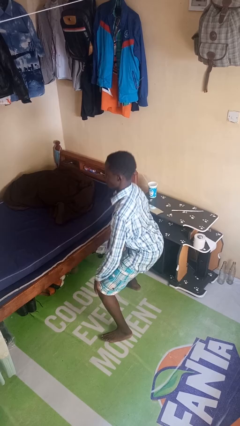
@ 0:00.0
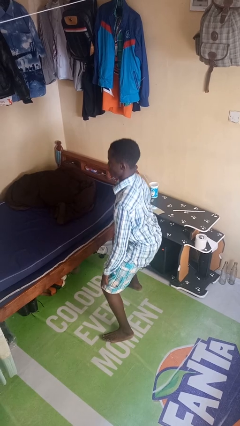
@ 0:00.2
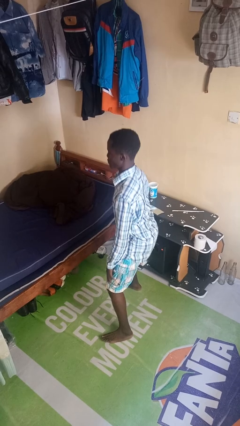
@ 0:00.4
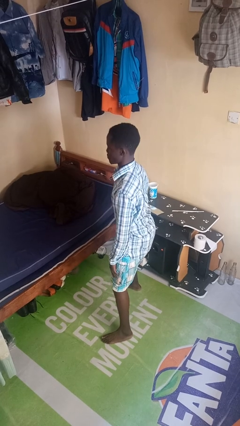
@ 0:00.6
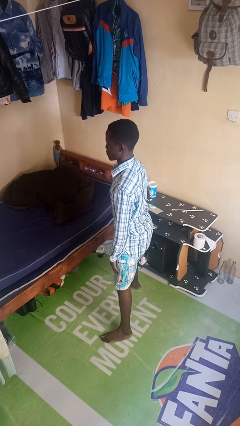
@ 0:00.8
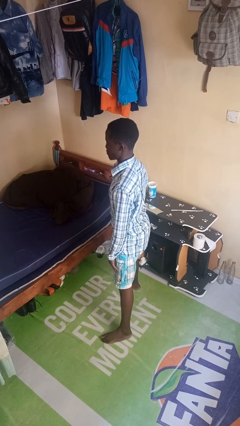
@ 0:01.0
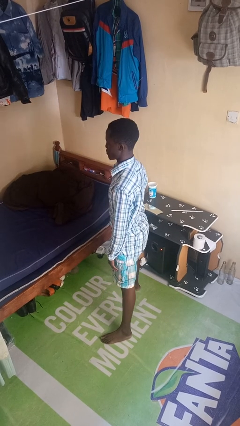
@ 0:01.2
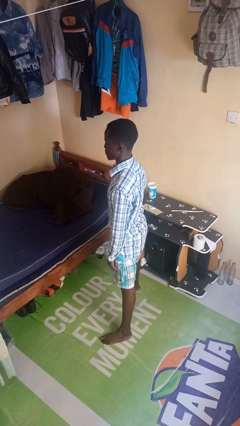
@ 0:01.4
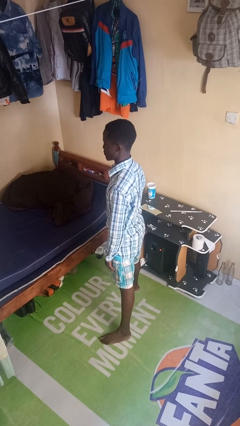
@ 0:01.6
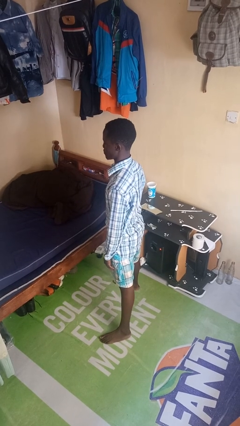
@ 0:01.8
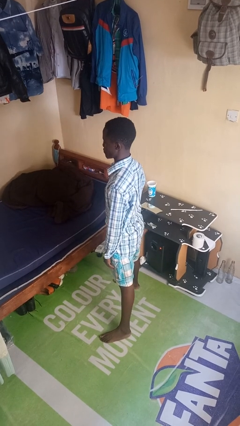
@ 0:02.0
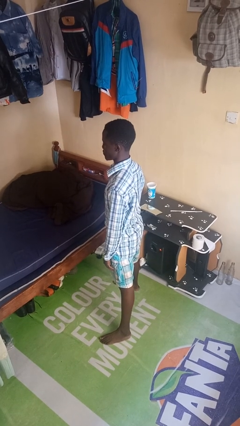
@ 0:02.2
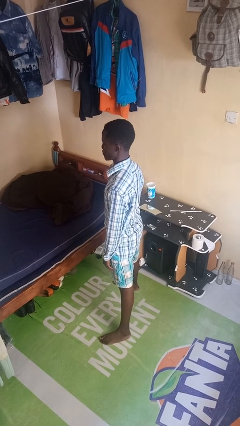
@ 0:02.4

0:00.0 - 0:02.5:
person stands up

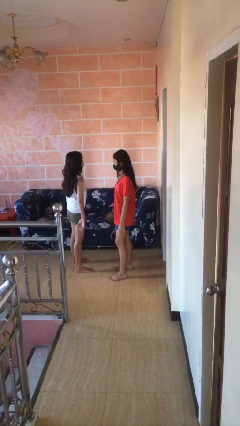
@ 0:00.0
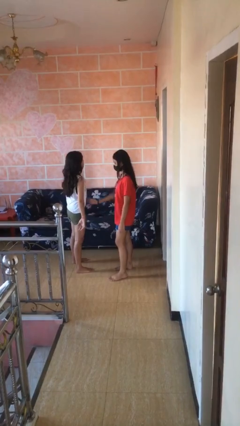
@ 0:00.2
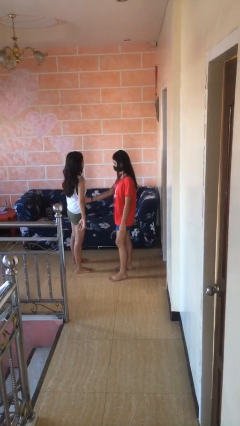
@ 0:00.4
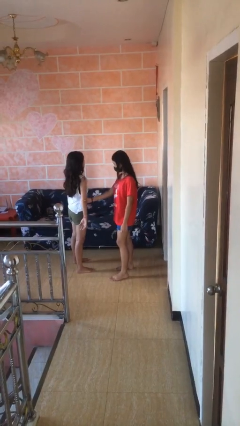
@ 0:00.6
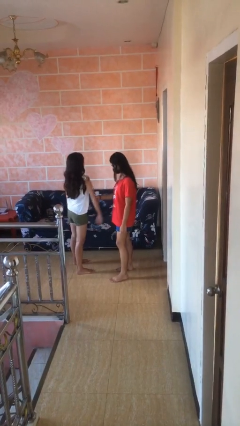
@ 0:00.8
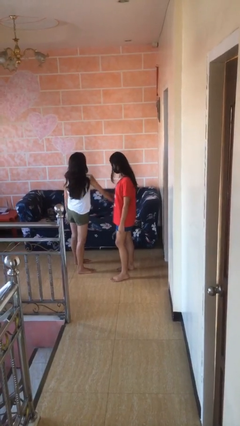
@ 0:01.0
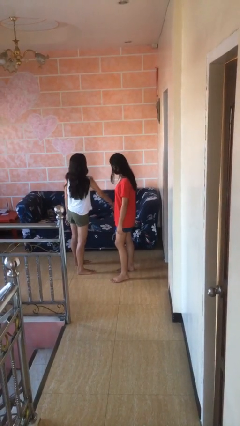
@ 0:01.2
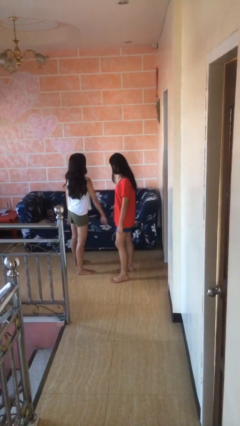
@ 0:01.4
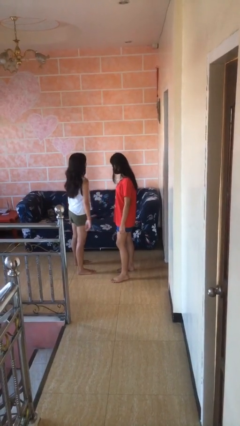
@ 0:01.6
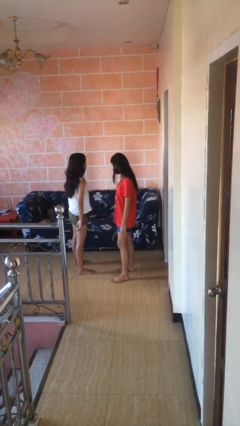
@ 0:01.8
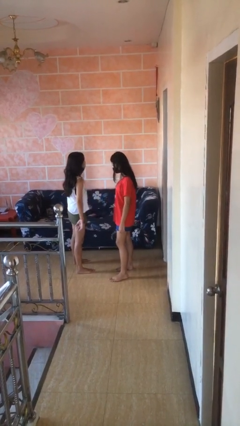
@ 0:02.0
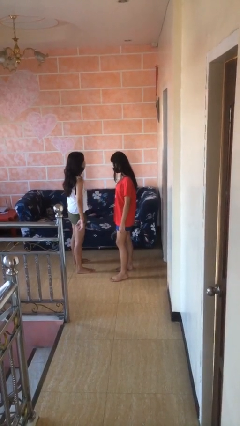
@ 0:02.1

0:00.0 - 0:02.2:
person grabs person by forearm

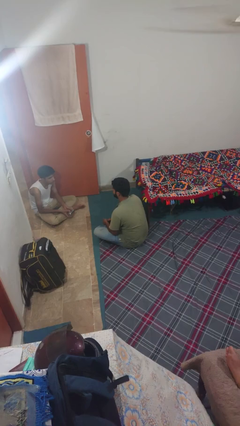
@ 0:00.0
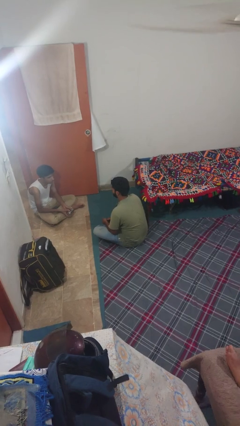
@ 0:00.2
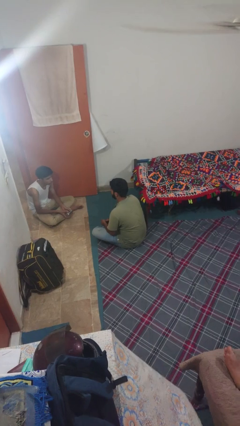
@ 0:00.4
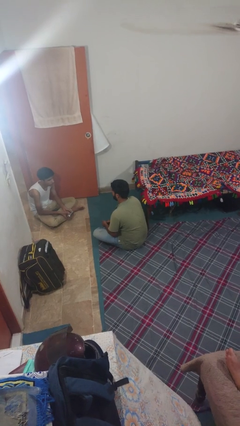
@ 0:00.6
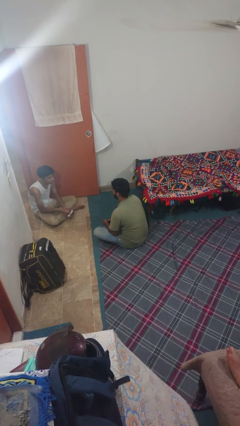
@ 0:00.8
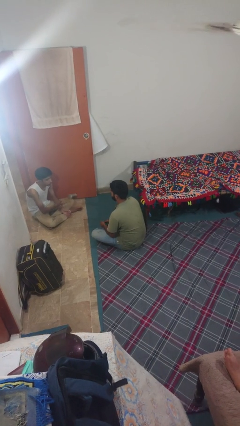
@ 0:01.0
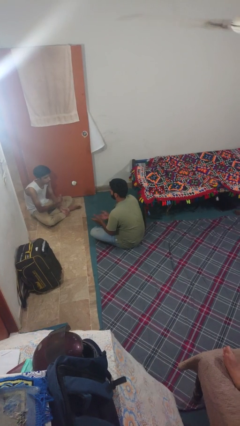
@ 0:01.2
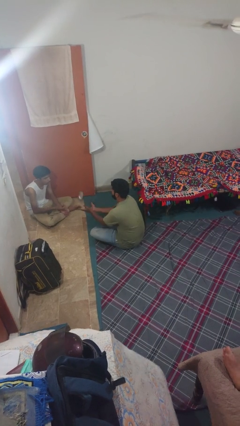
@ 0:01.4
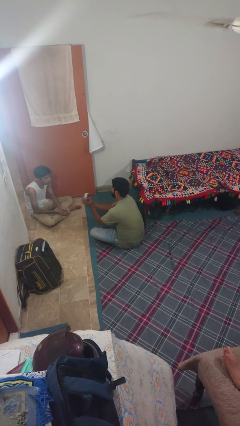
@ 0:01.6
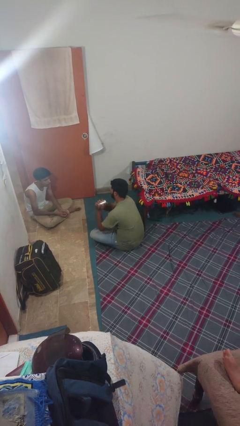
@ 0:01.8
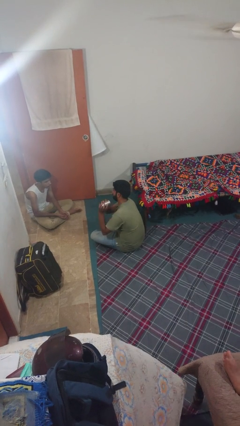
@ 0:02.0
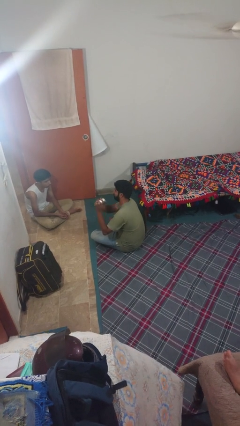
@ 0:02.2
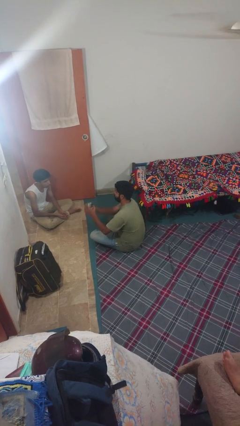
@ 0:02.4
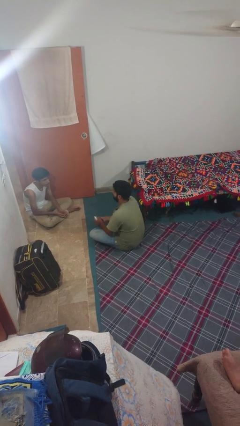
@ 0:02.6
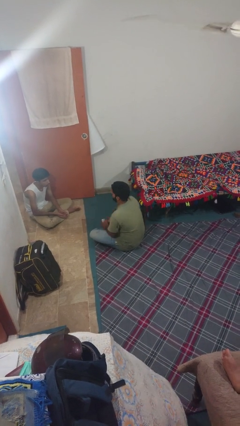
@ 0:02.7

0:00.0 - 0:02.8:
person catches object from person

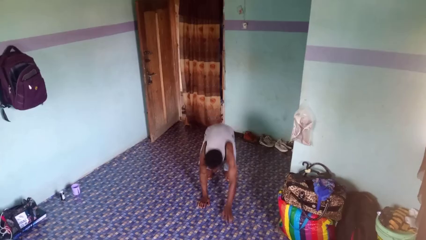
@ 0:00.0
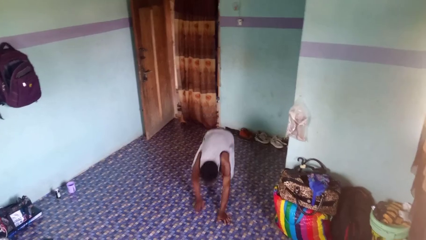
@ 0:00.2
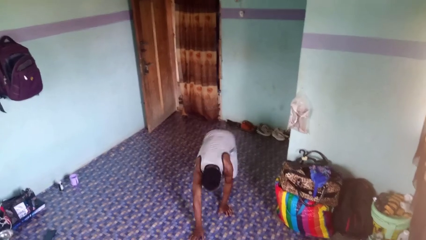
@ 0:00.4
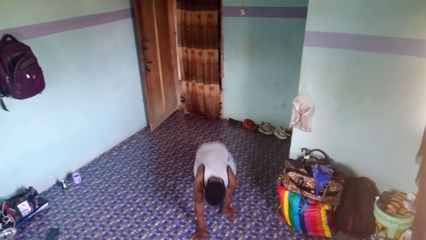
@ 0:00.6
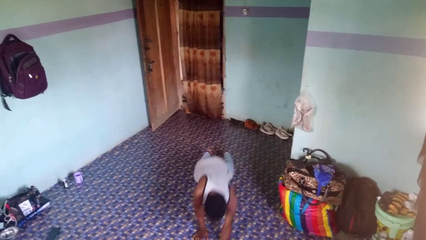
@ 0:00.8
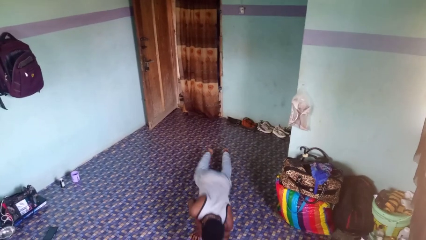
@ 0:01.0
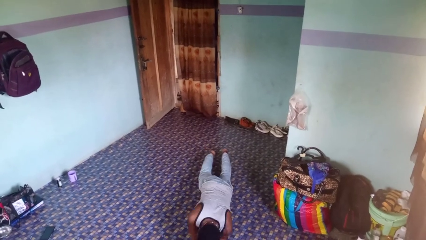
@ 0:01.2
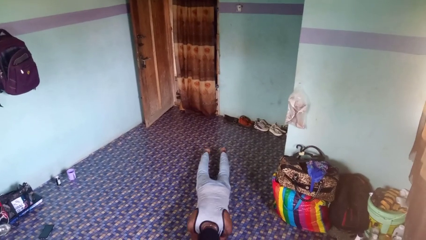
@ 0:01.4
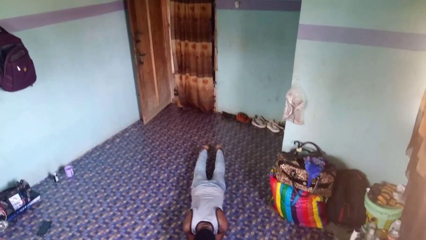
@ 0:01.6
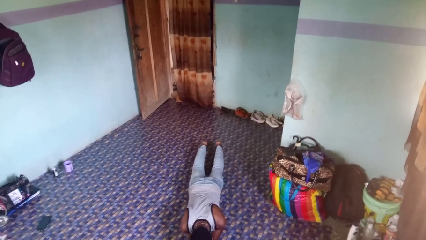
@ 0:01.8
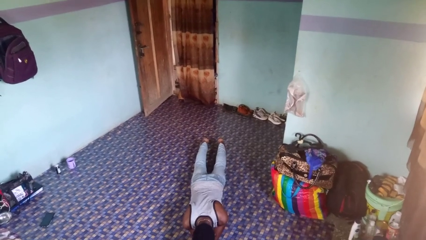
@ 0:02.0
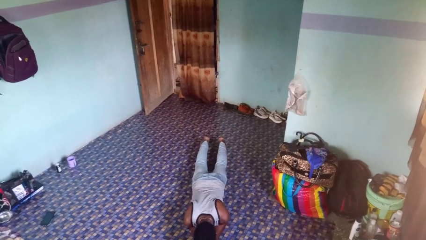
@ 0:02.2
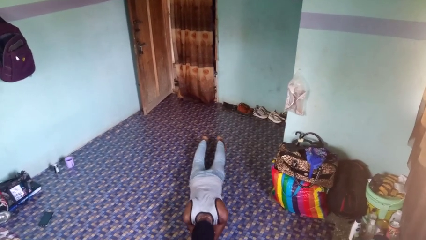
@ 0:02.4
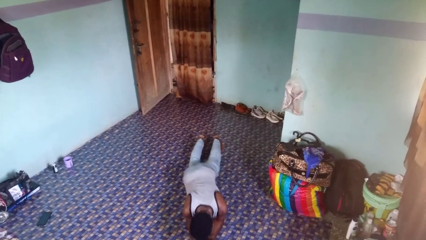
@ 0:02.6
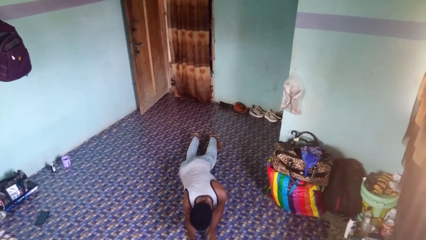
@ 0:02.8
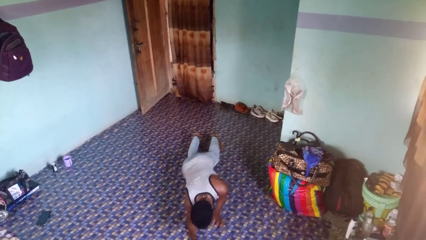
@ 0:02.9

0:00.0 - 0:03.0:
person exercises with plank

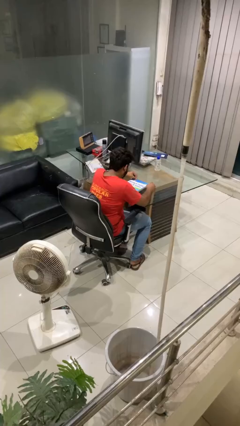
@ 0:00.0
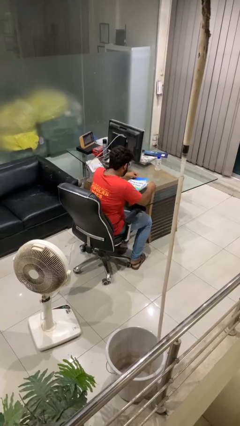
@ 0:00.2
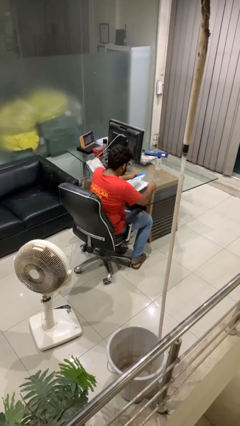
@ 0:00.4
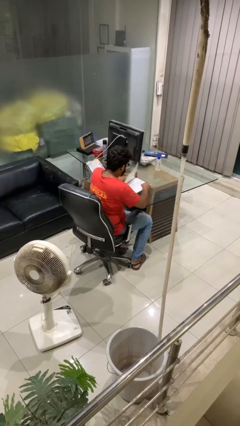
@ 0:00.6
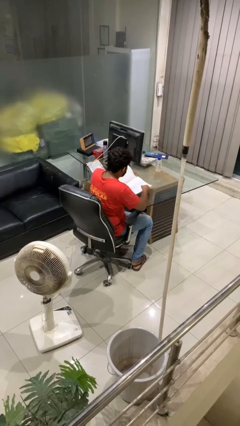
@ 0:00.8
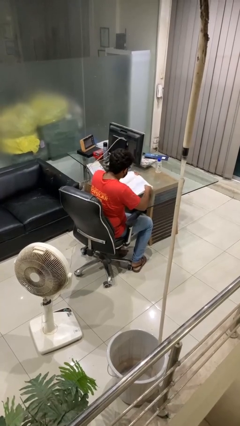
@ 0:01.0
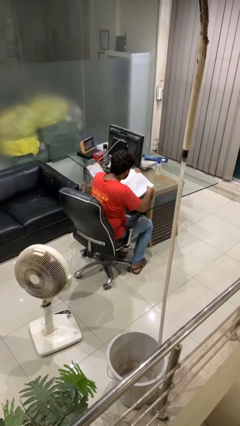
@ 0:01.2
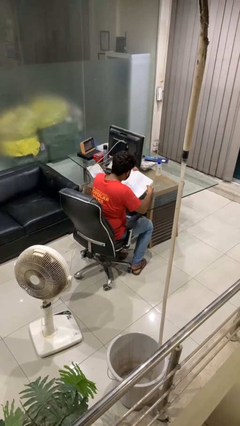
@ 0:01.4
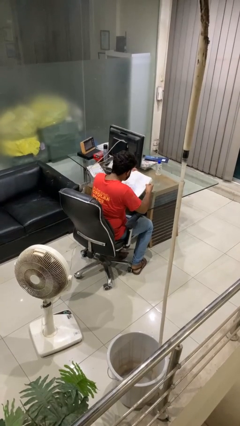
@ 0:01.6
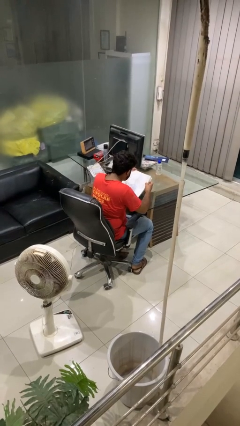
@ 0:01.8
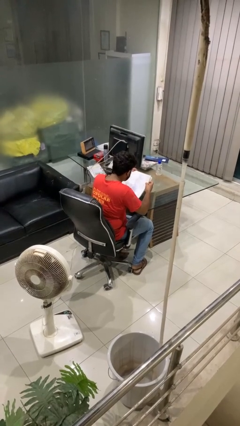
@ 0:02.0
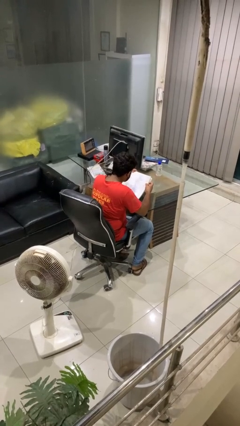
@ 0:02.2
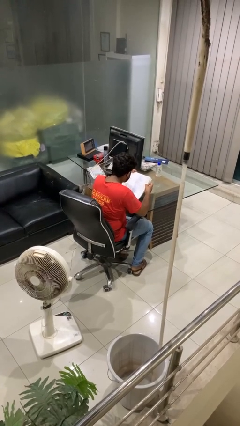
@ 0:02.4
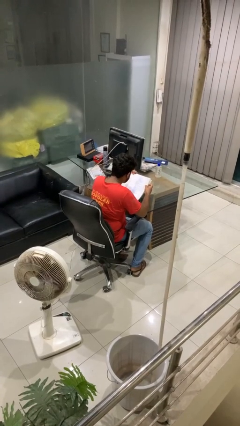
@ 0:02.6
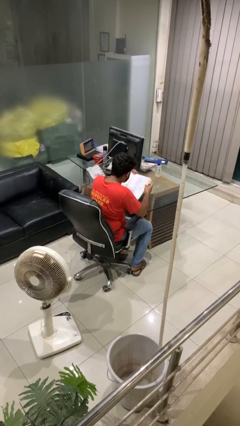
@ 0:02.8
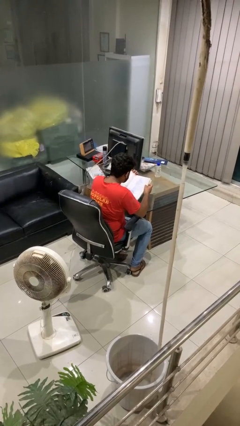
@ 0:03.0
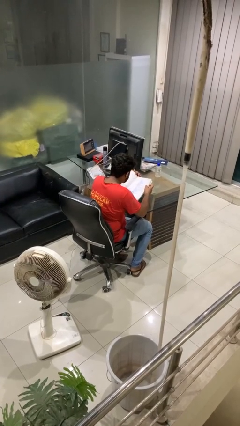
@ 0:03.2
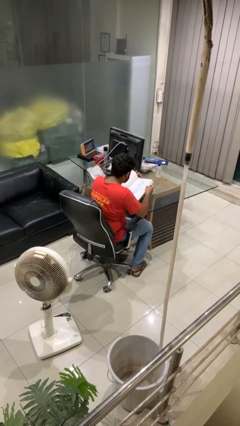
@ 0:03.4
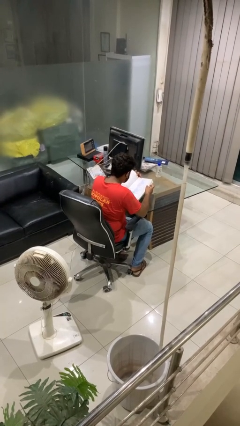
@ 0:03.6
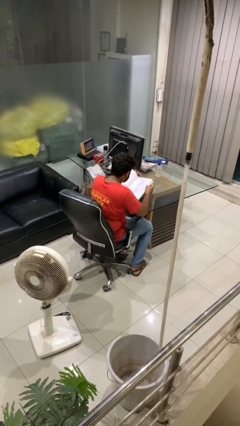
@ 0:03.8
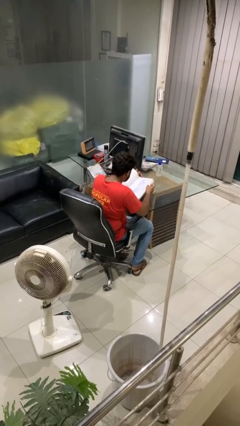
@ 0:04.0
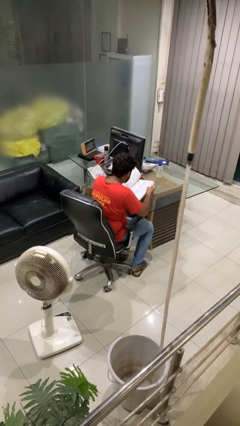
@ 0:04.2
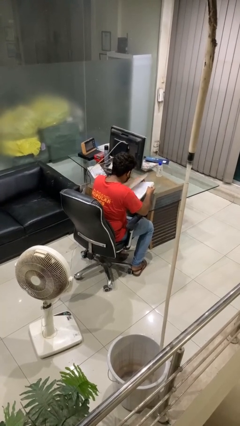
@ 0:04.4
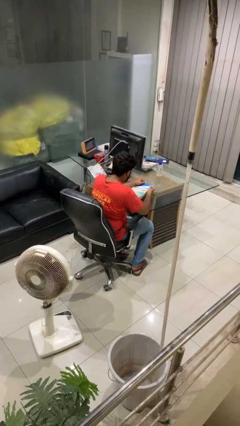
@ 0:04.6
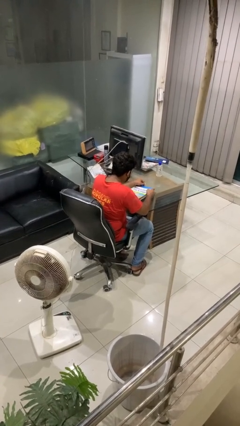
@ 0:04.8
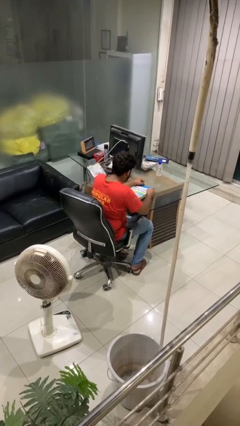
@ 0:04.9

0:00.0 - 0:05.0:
person reads book

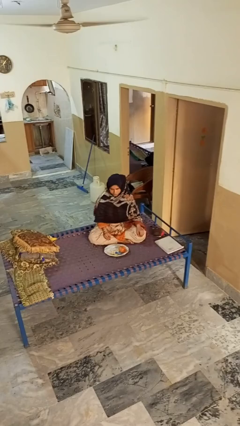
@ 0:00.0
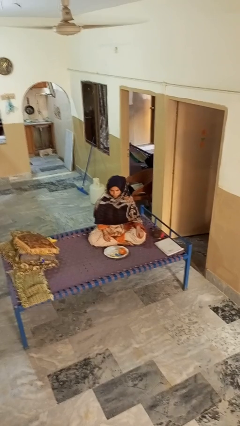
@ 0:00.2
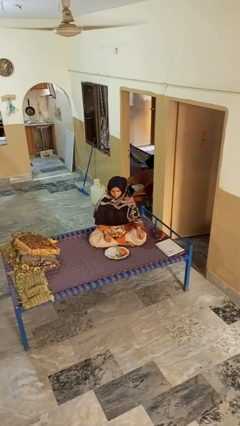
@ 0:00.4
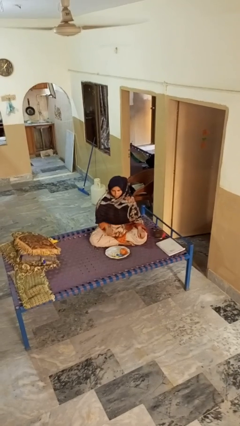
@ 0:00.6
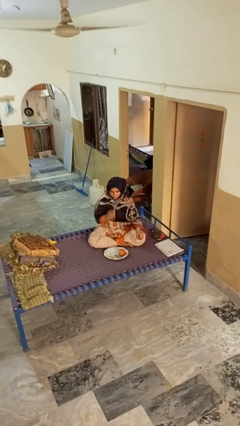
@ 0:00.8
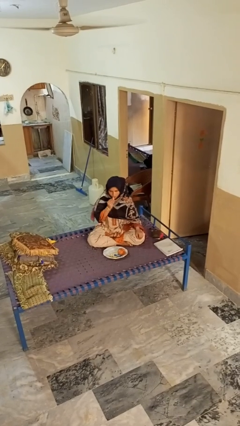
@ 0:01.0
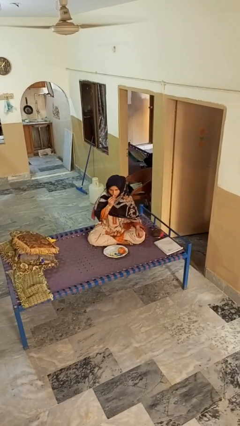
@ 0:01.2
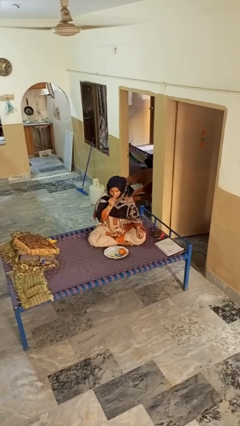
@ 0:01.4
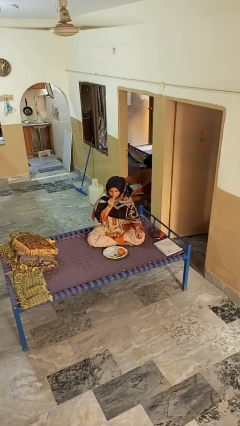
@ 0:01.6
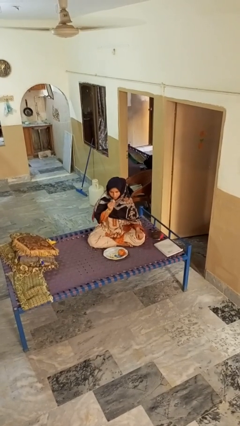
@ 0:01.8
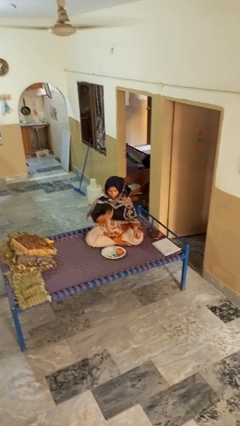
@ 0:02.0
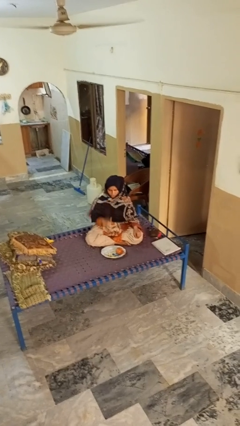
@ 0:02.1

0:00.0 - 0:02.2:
person eats apple
